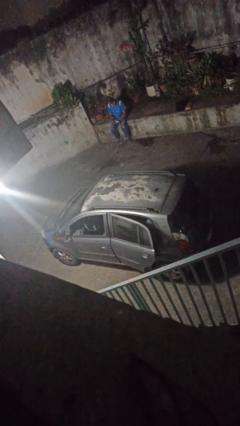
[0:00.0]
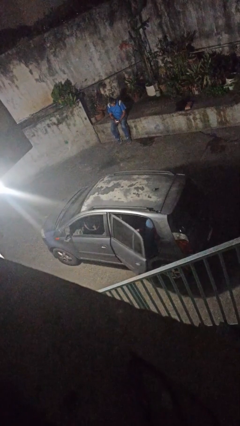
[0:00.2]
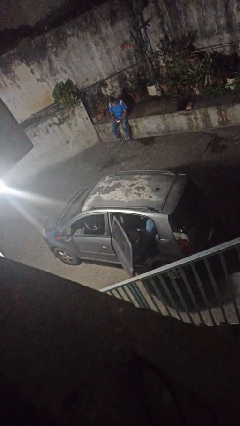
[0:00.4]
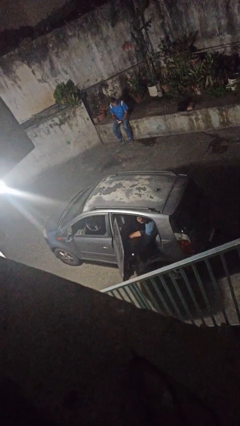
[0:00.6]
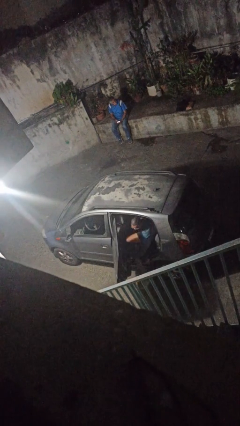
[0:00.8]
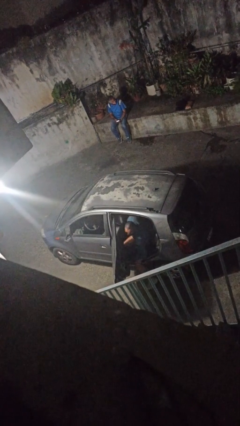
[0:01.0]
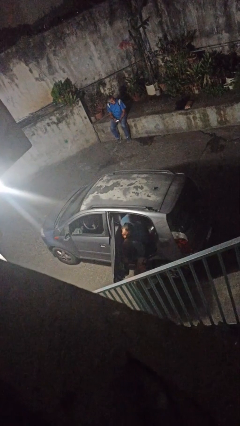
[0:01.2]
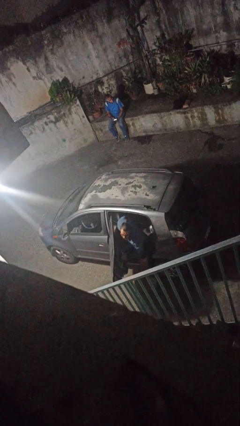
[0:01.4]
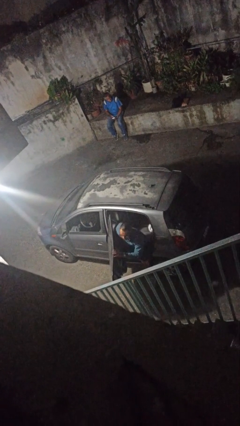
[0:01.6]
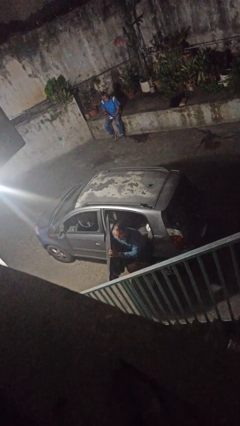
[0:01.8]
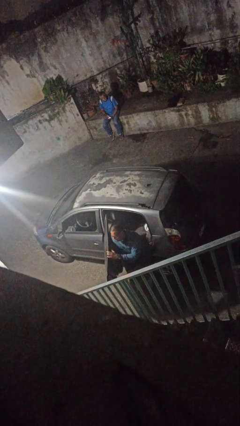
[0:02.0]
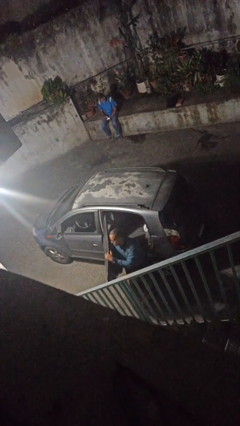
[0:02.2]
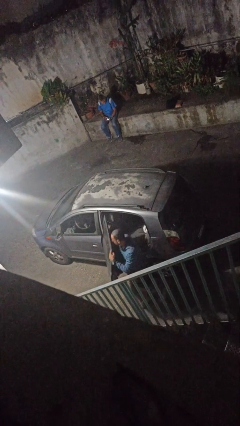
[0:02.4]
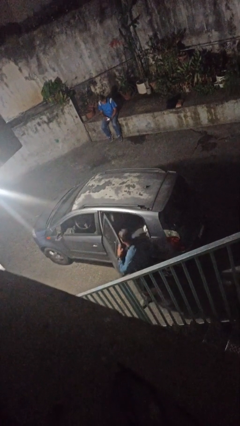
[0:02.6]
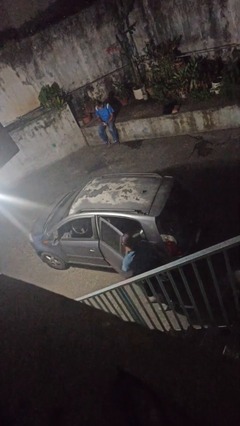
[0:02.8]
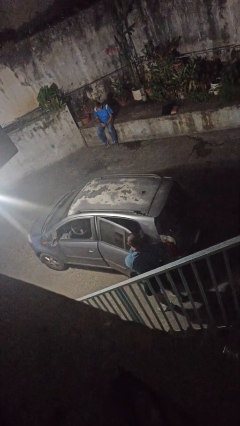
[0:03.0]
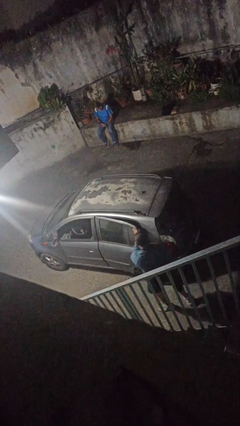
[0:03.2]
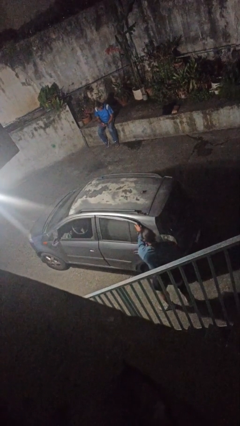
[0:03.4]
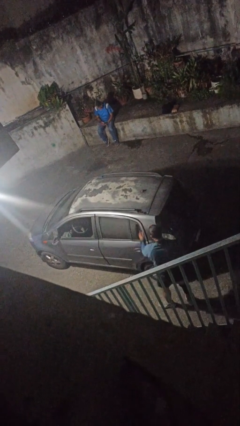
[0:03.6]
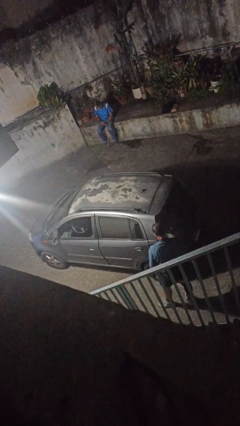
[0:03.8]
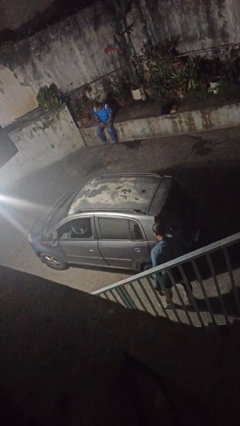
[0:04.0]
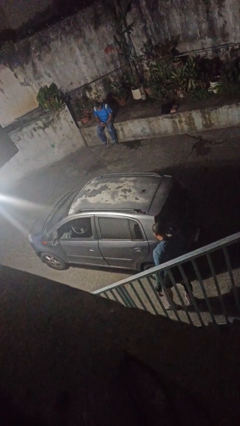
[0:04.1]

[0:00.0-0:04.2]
car drops off person

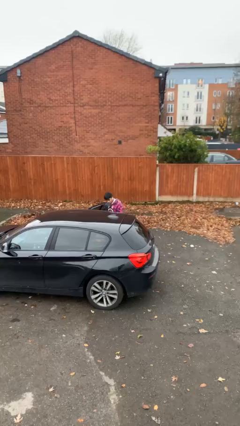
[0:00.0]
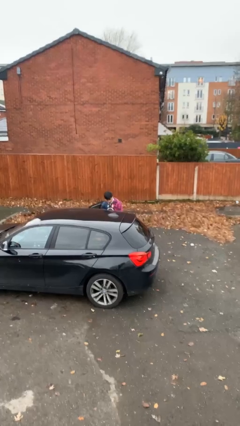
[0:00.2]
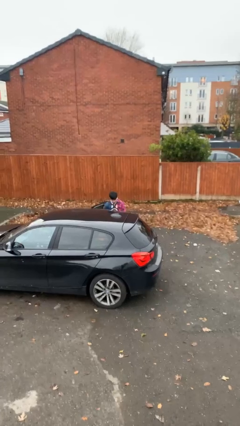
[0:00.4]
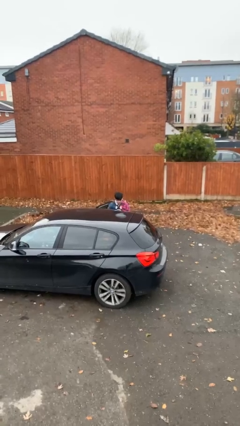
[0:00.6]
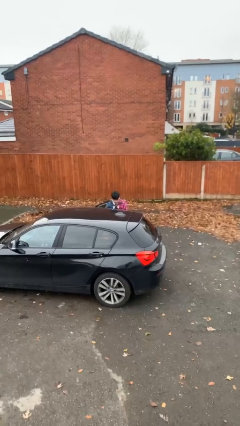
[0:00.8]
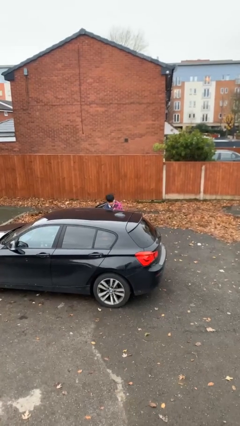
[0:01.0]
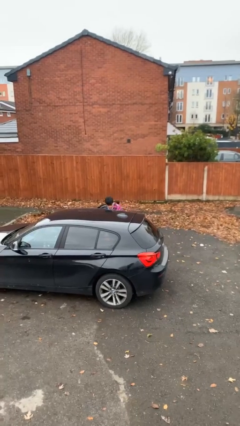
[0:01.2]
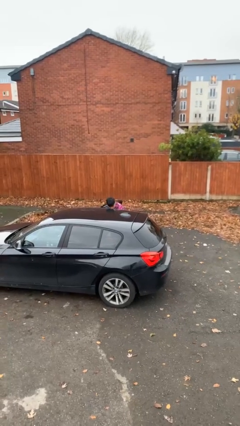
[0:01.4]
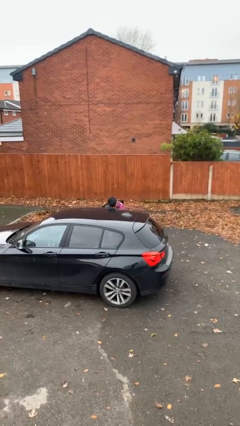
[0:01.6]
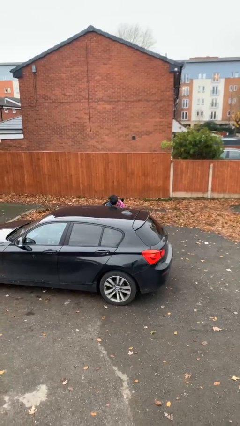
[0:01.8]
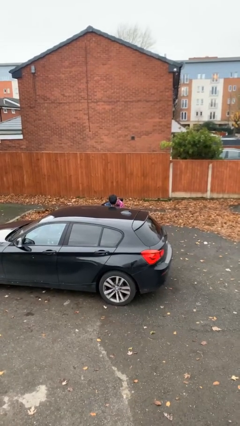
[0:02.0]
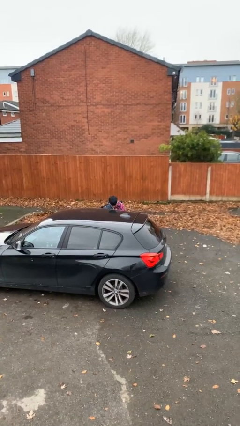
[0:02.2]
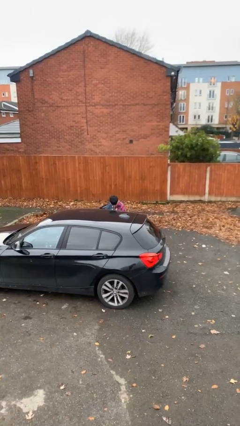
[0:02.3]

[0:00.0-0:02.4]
person unloads car

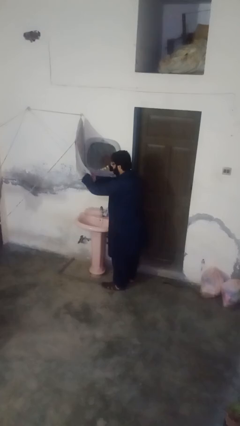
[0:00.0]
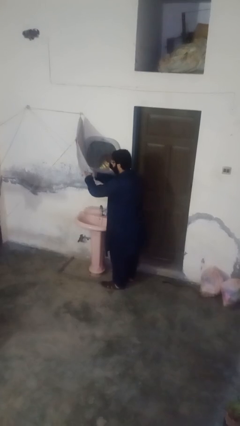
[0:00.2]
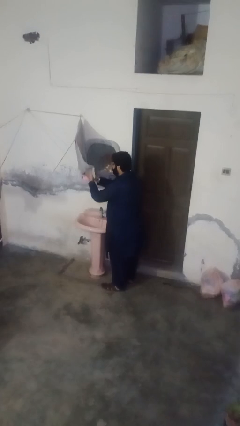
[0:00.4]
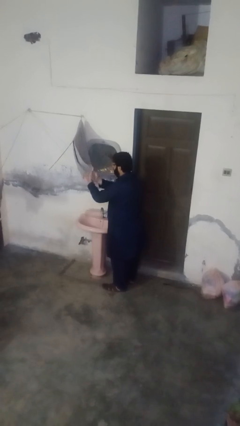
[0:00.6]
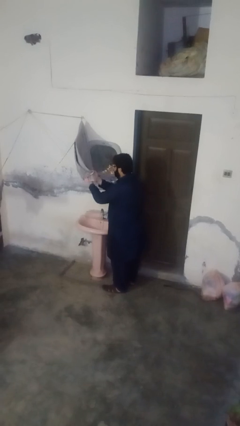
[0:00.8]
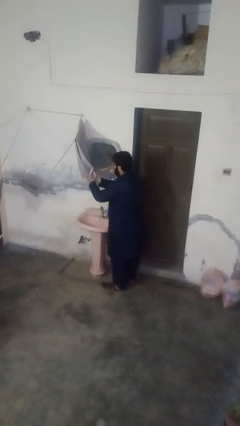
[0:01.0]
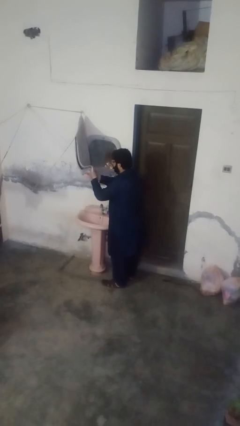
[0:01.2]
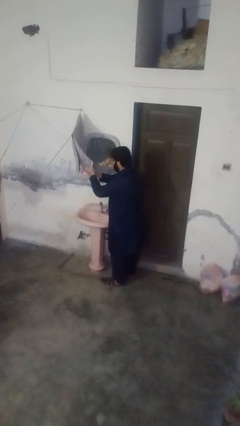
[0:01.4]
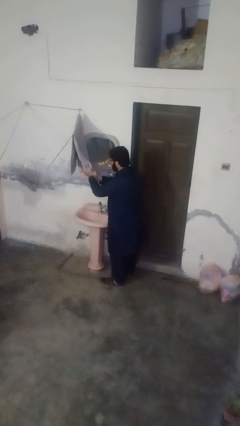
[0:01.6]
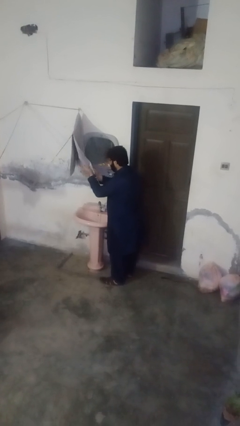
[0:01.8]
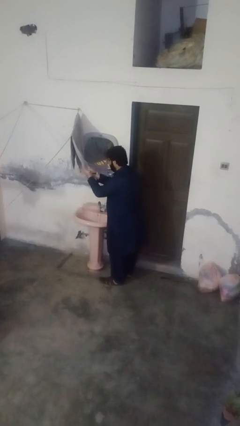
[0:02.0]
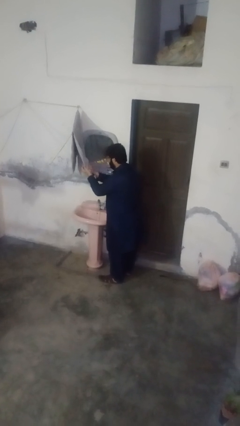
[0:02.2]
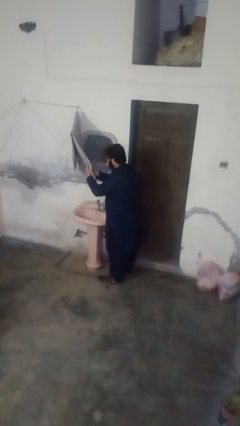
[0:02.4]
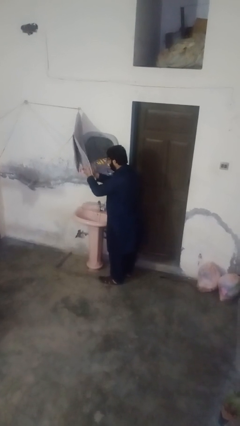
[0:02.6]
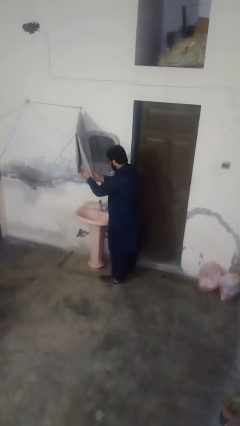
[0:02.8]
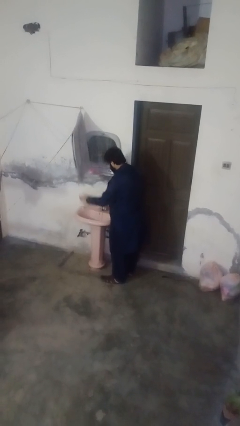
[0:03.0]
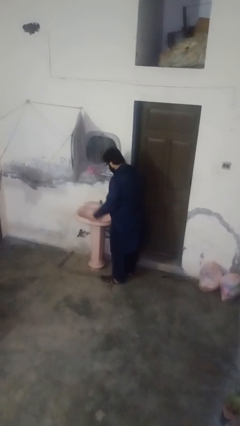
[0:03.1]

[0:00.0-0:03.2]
person dries hands with towel

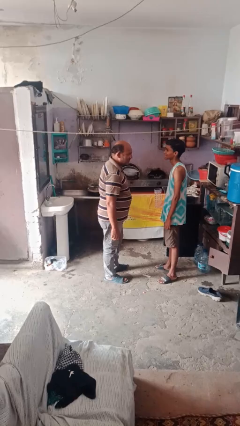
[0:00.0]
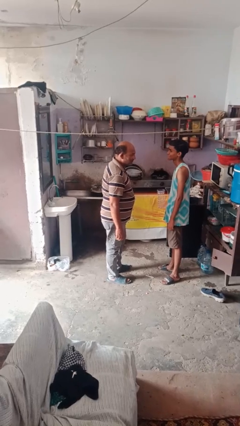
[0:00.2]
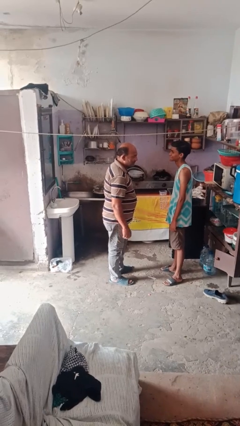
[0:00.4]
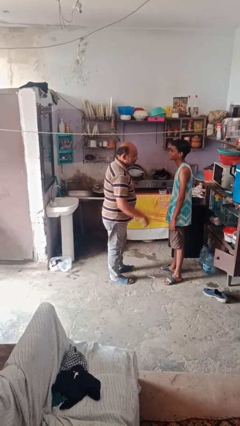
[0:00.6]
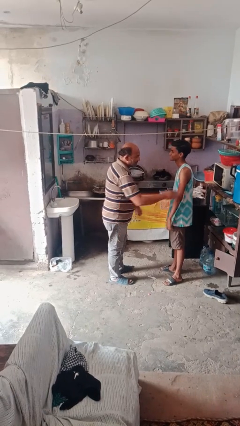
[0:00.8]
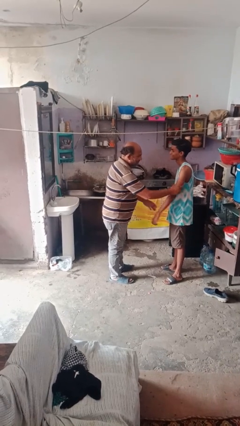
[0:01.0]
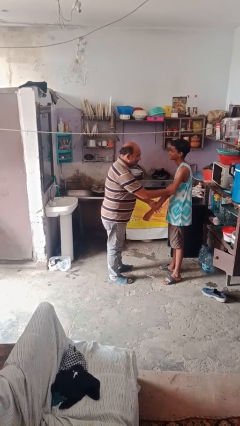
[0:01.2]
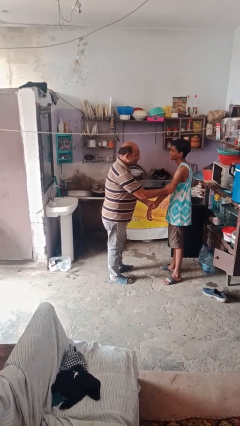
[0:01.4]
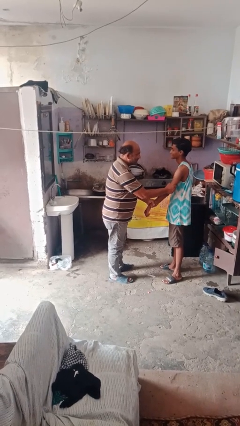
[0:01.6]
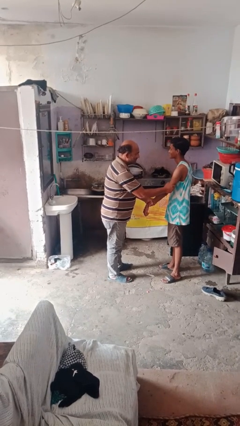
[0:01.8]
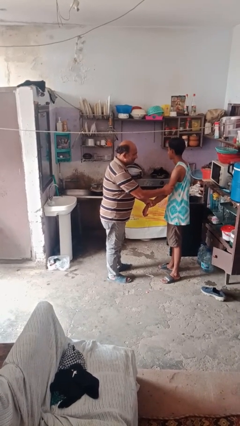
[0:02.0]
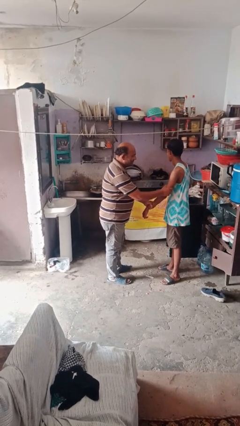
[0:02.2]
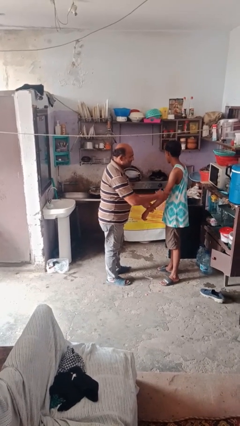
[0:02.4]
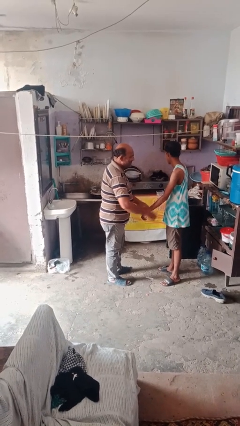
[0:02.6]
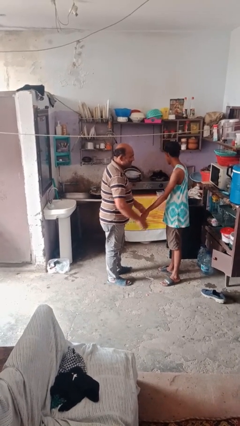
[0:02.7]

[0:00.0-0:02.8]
person grabs person by forearm

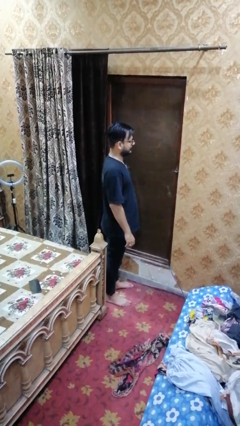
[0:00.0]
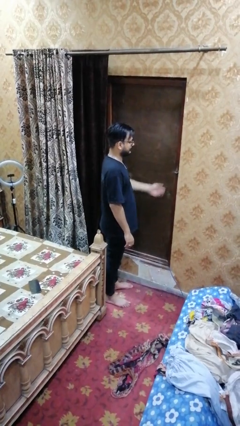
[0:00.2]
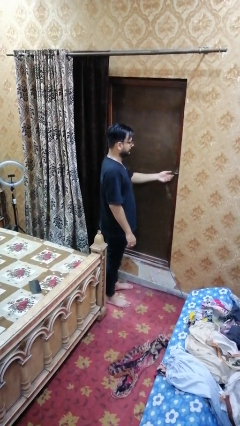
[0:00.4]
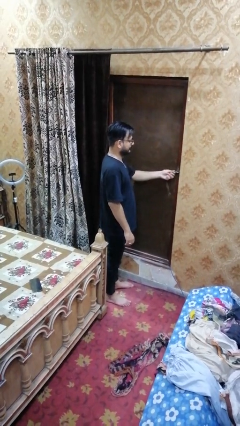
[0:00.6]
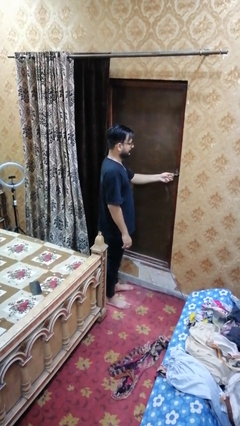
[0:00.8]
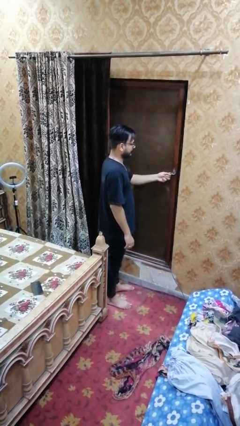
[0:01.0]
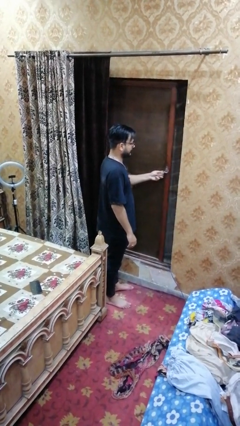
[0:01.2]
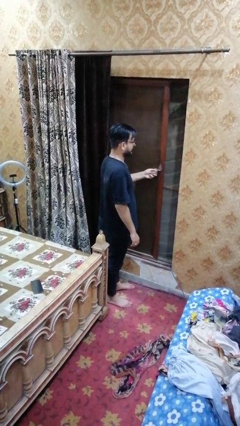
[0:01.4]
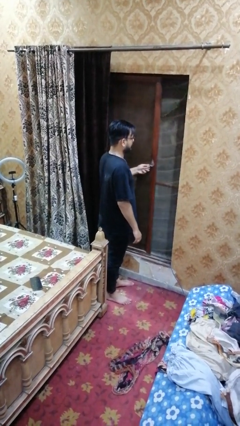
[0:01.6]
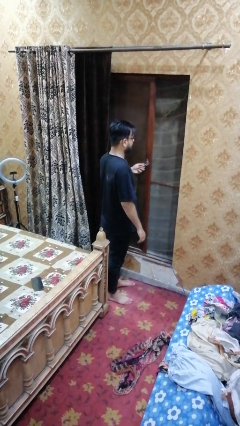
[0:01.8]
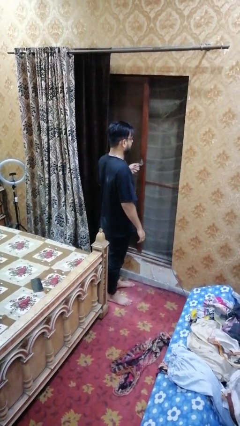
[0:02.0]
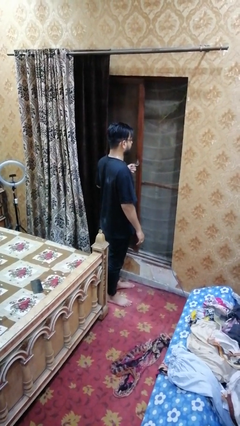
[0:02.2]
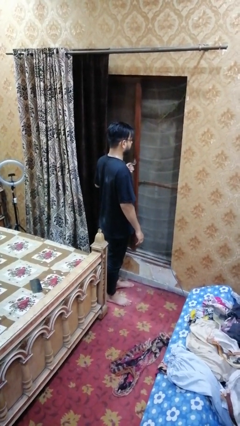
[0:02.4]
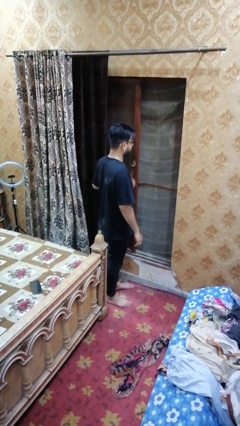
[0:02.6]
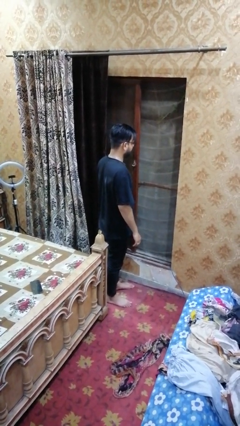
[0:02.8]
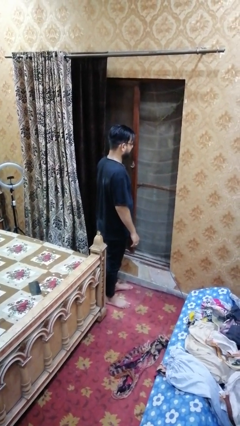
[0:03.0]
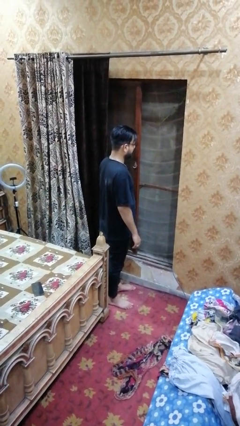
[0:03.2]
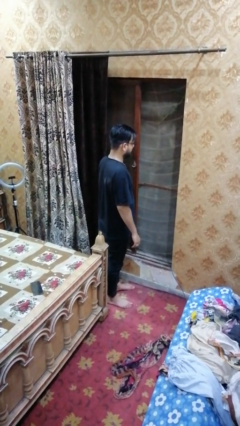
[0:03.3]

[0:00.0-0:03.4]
person opens sliding door

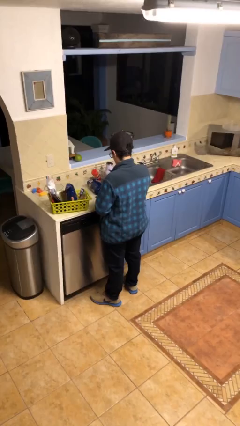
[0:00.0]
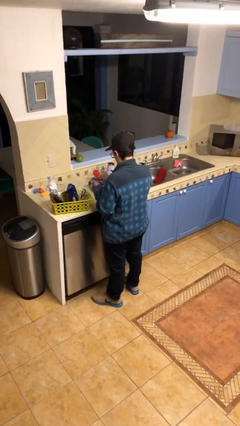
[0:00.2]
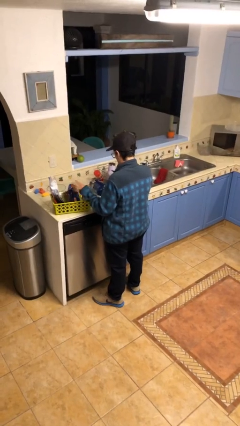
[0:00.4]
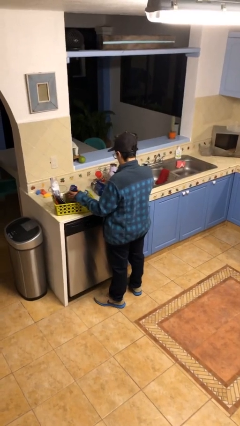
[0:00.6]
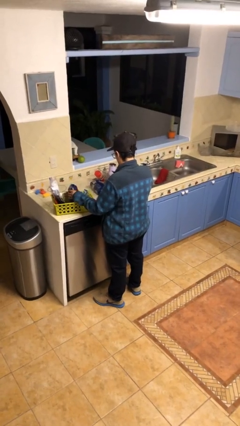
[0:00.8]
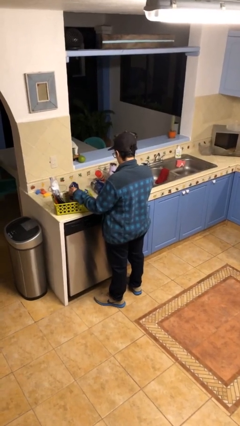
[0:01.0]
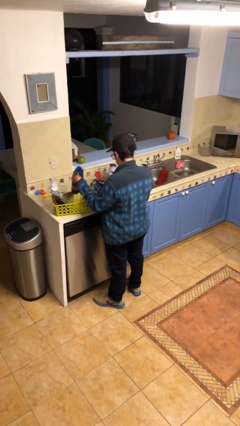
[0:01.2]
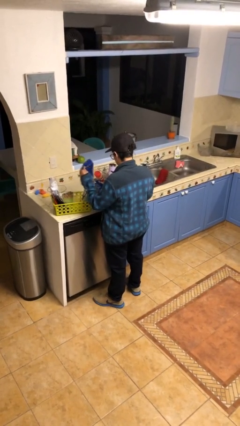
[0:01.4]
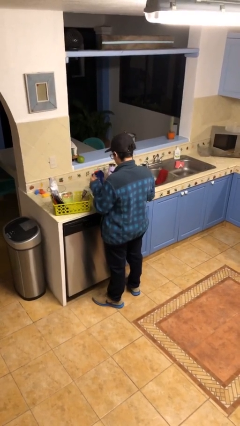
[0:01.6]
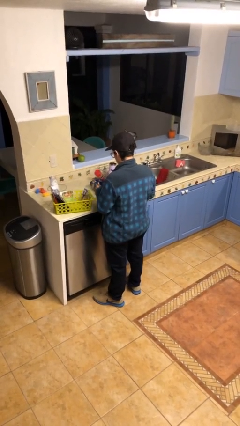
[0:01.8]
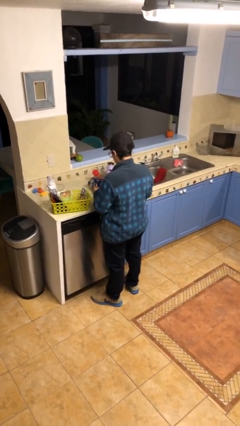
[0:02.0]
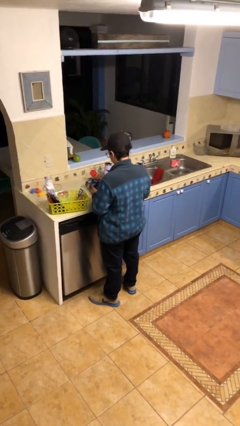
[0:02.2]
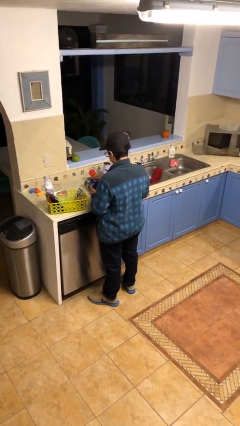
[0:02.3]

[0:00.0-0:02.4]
person takes object from basket
